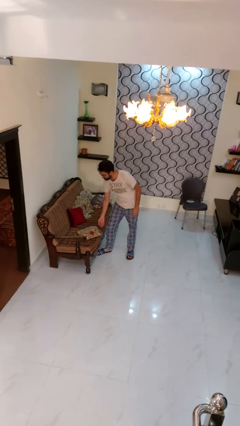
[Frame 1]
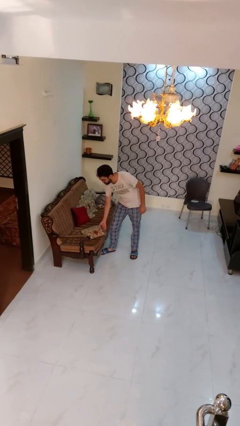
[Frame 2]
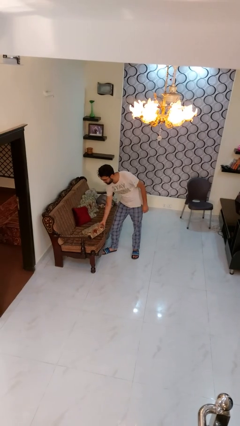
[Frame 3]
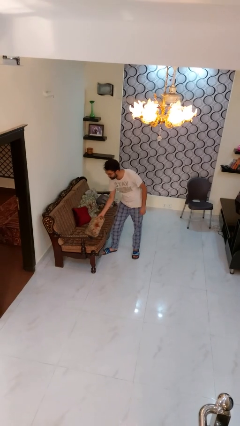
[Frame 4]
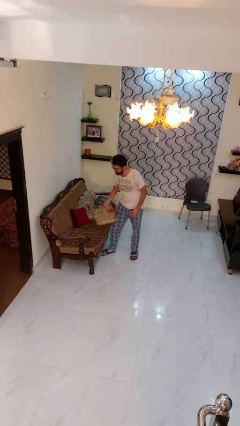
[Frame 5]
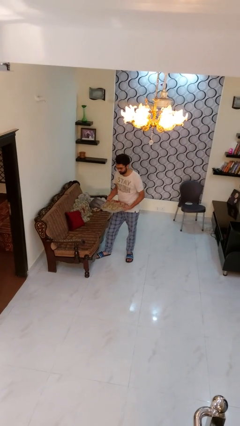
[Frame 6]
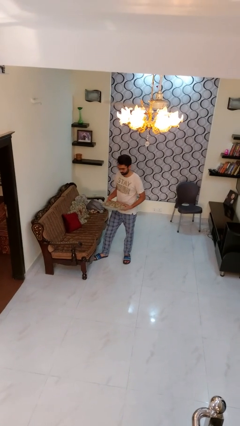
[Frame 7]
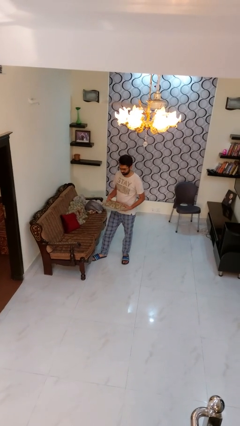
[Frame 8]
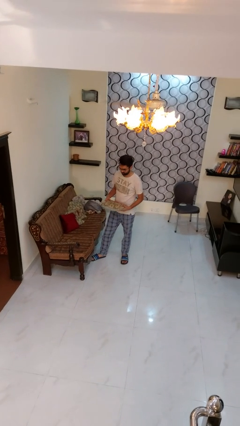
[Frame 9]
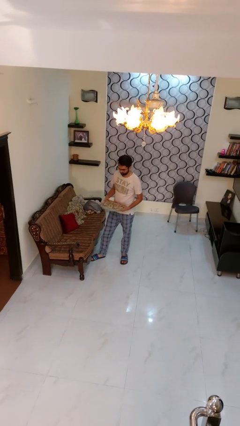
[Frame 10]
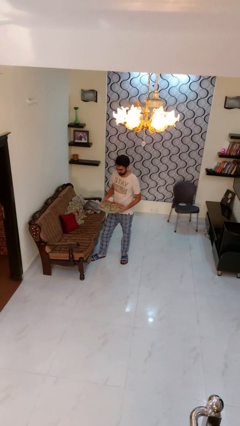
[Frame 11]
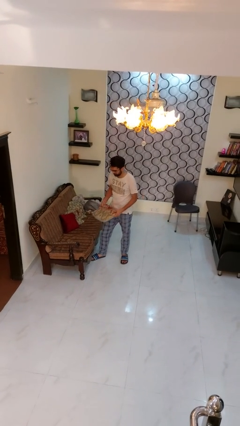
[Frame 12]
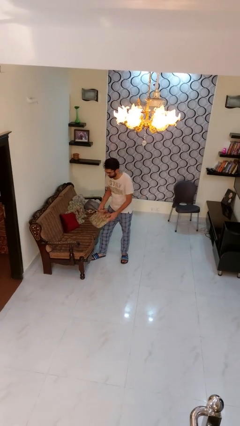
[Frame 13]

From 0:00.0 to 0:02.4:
person picks up object from couch

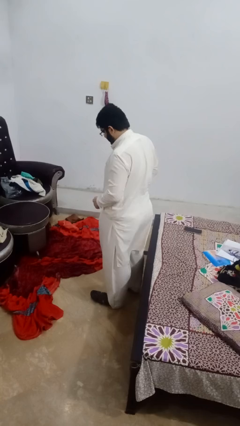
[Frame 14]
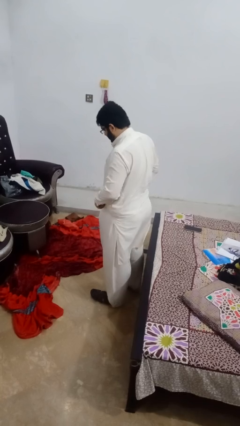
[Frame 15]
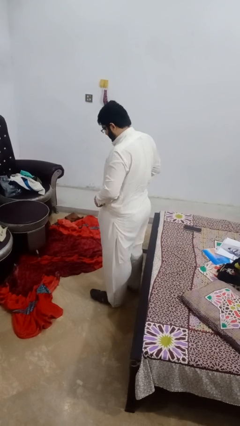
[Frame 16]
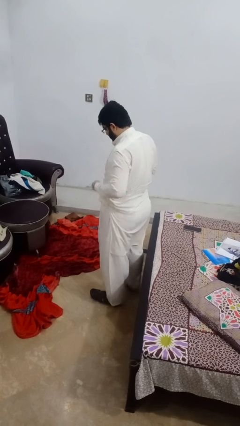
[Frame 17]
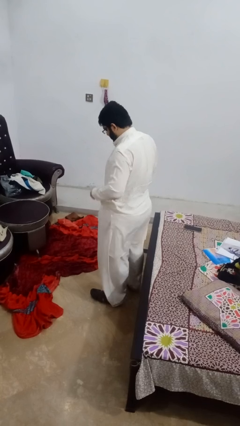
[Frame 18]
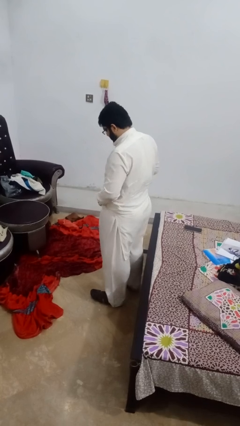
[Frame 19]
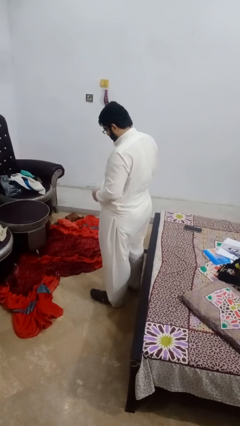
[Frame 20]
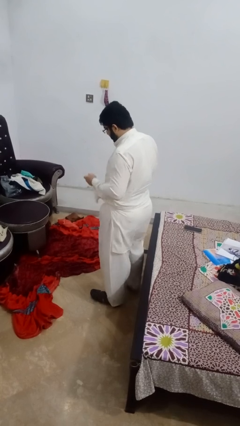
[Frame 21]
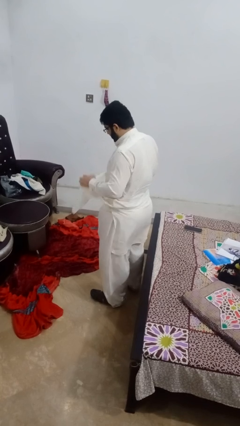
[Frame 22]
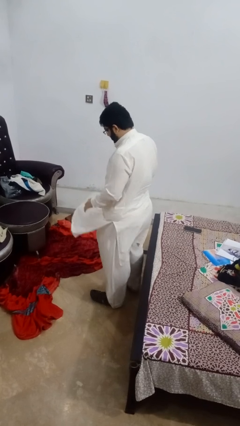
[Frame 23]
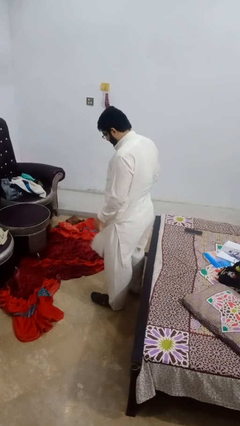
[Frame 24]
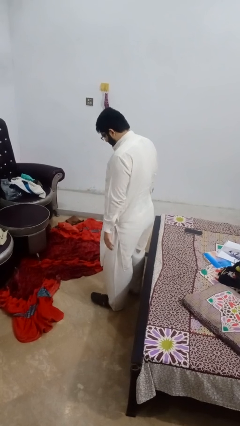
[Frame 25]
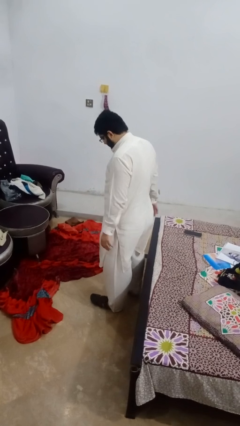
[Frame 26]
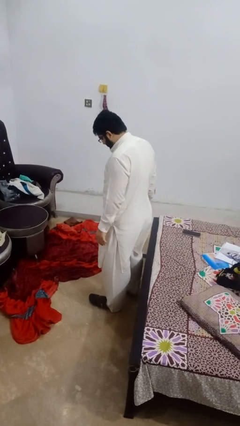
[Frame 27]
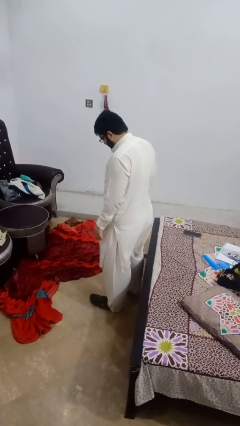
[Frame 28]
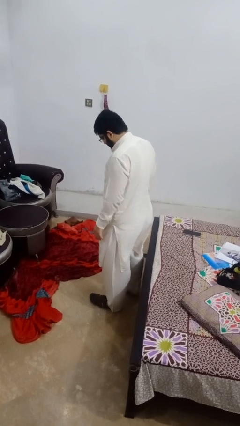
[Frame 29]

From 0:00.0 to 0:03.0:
person untucks shirt

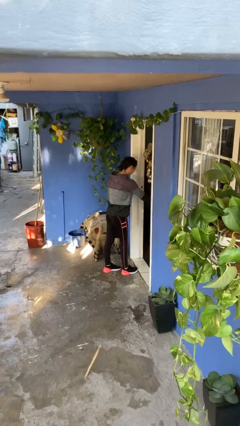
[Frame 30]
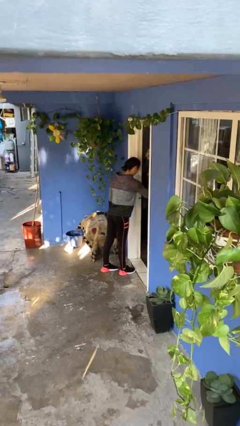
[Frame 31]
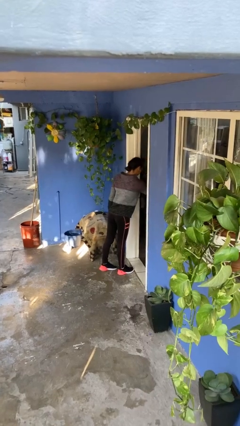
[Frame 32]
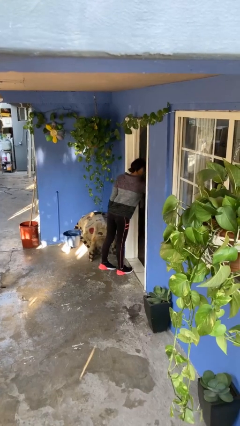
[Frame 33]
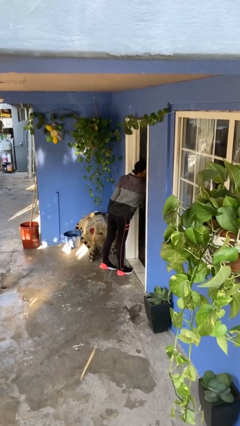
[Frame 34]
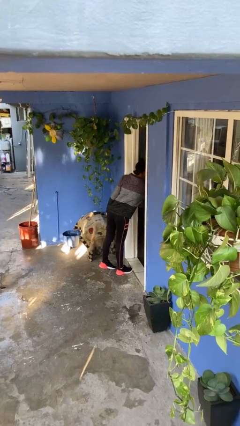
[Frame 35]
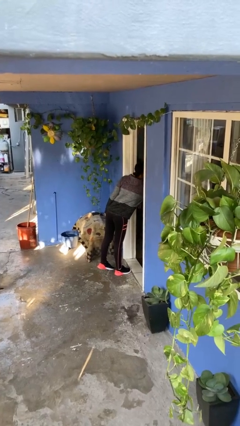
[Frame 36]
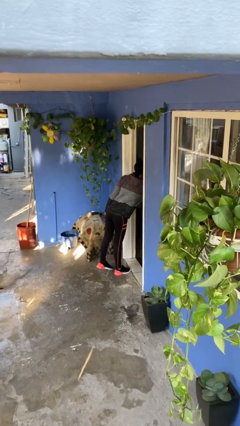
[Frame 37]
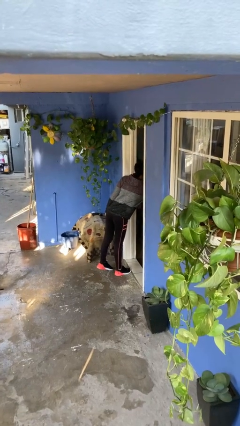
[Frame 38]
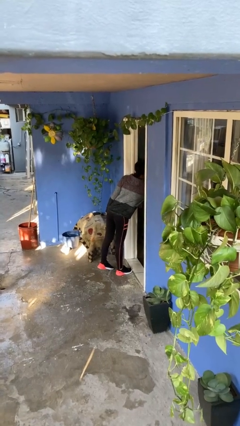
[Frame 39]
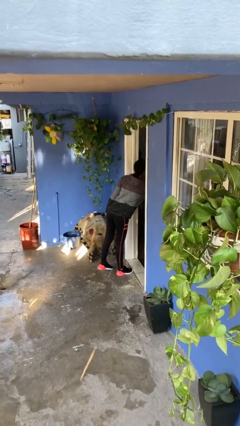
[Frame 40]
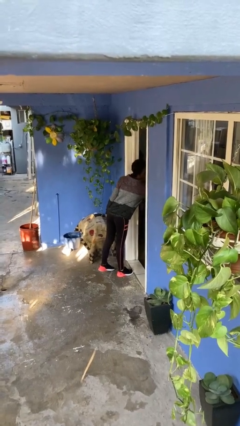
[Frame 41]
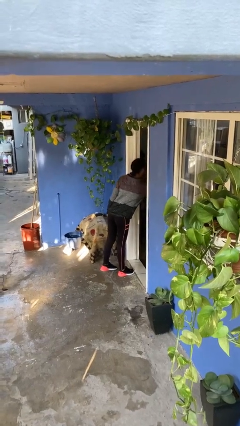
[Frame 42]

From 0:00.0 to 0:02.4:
person opens facility door

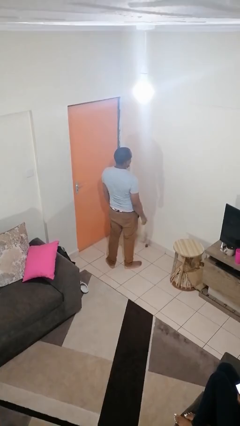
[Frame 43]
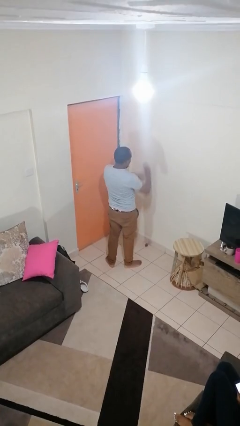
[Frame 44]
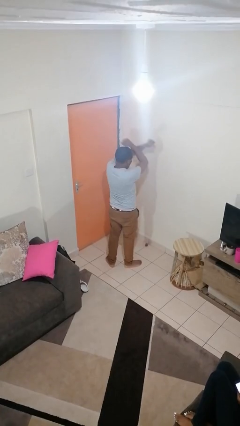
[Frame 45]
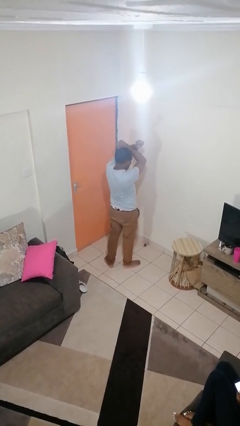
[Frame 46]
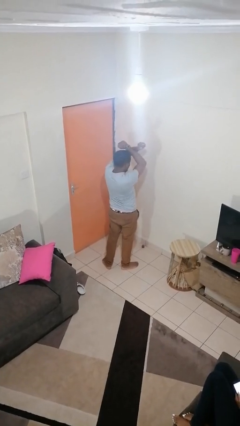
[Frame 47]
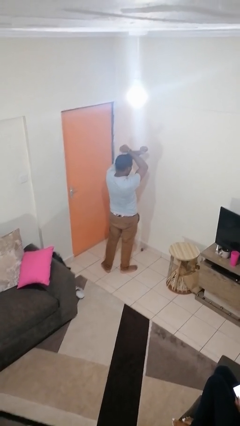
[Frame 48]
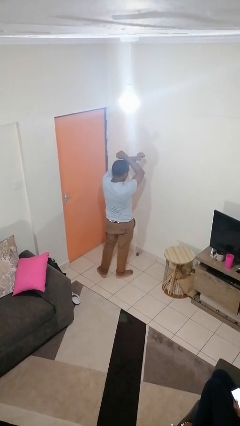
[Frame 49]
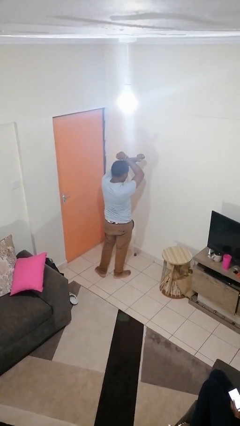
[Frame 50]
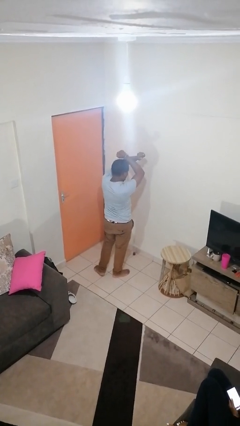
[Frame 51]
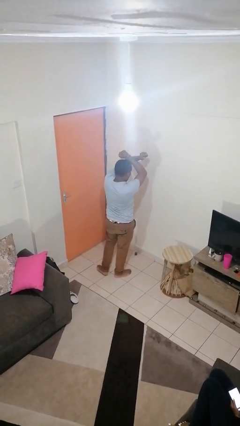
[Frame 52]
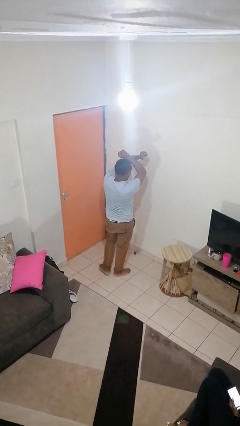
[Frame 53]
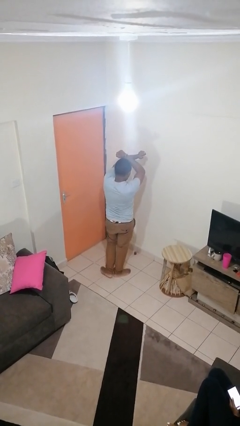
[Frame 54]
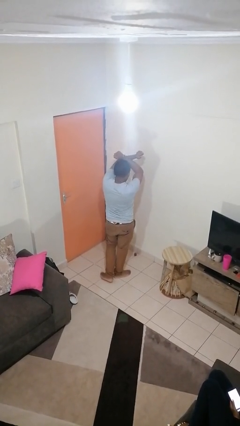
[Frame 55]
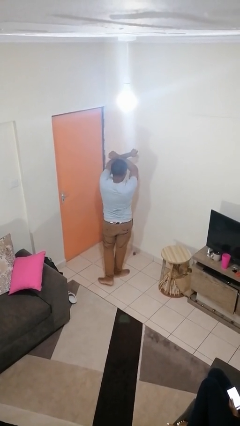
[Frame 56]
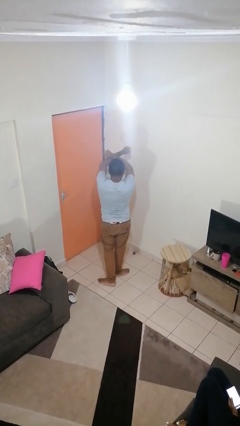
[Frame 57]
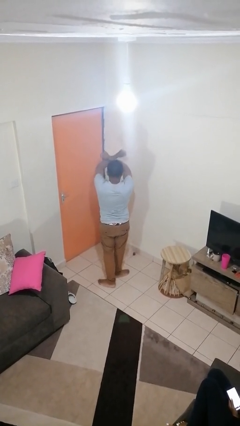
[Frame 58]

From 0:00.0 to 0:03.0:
person gestures arms x

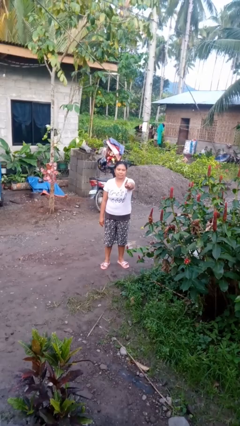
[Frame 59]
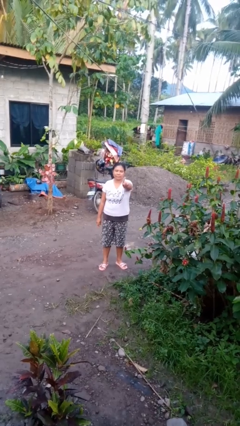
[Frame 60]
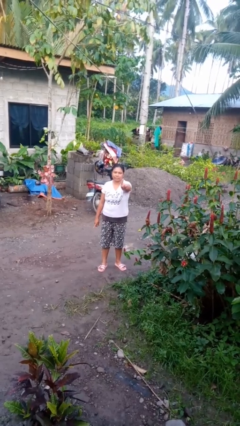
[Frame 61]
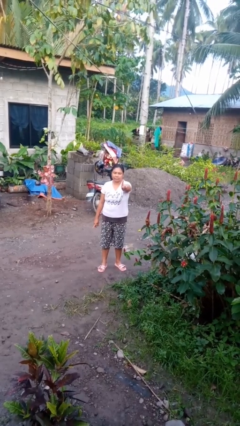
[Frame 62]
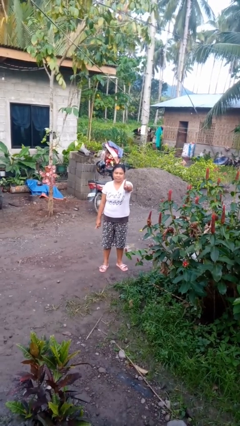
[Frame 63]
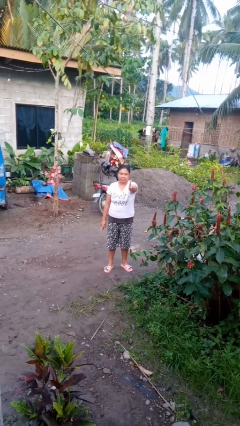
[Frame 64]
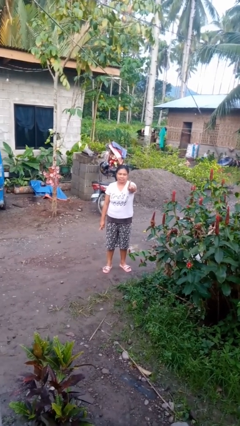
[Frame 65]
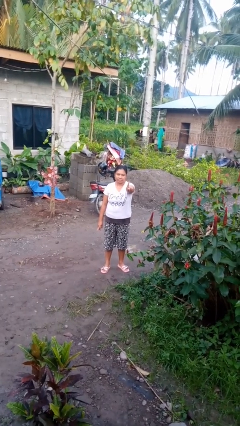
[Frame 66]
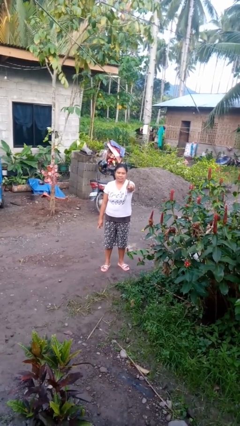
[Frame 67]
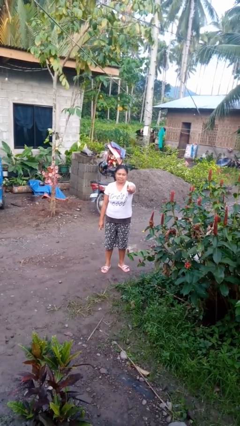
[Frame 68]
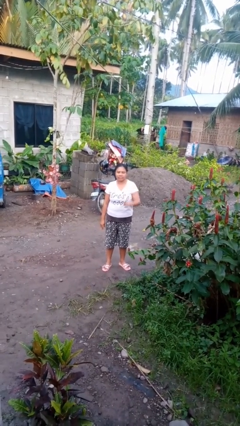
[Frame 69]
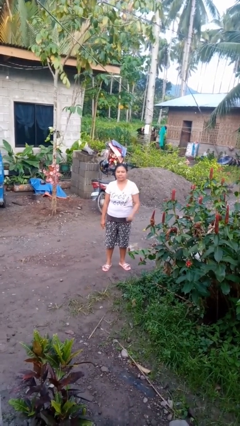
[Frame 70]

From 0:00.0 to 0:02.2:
person gestures number one

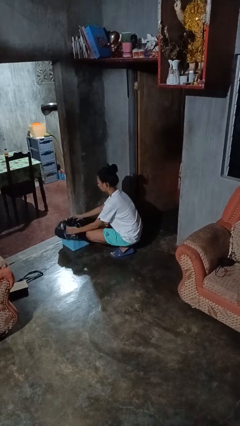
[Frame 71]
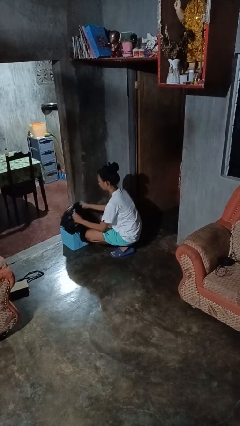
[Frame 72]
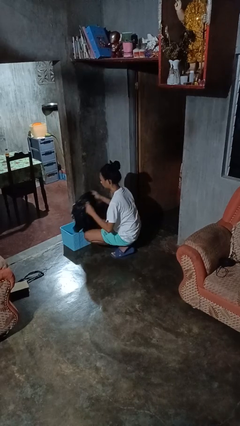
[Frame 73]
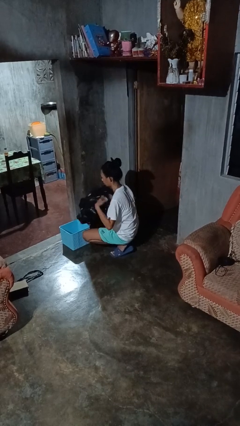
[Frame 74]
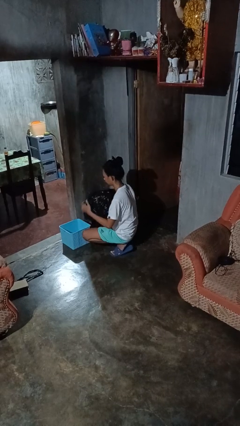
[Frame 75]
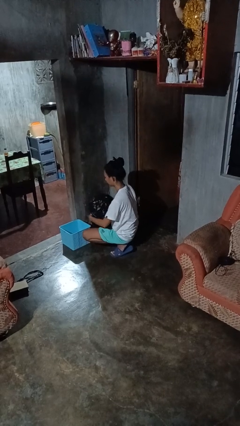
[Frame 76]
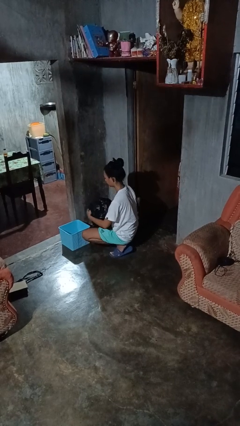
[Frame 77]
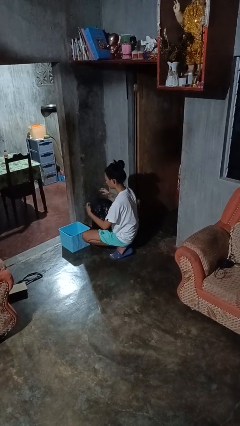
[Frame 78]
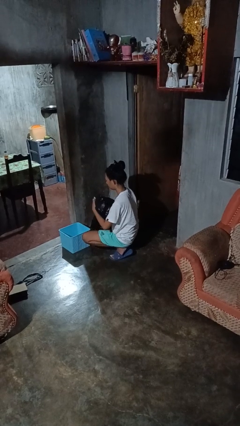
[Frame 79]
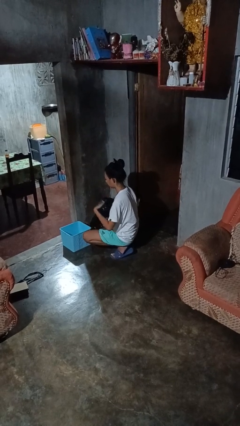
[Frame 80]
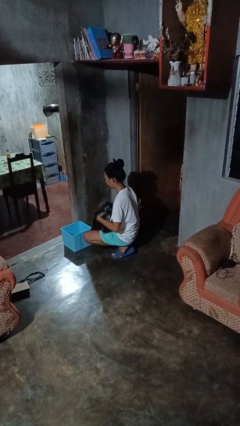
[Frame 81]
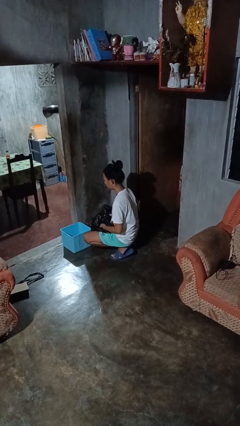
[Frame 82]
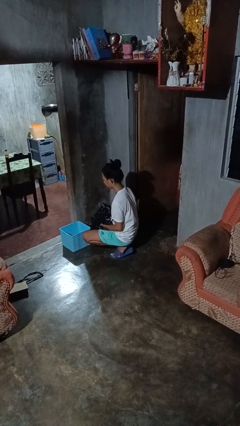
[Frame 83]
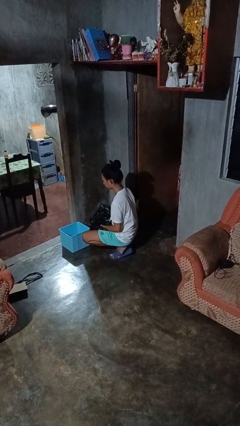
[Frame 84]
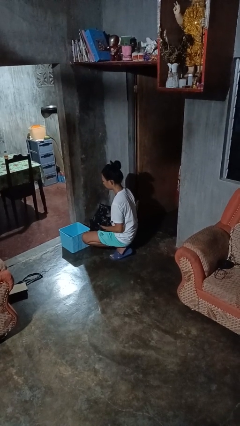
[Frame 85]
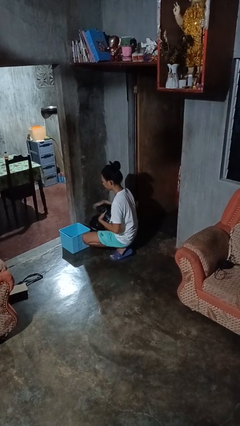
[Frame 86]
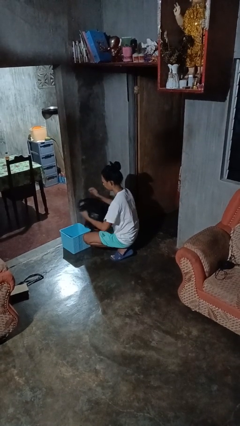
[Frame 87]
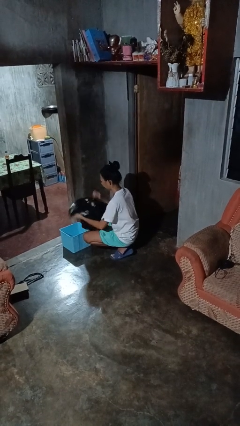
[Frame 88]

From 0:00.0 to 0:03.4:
person removes trashbag from trashcan

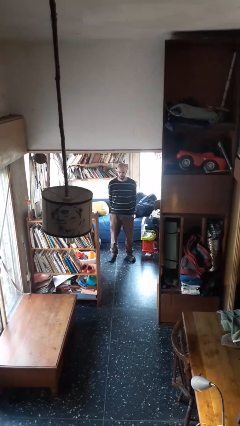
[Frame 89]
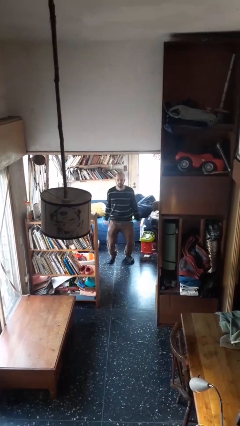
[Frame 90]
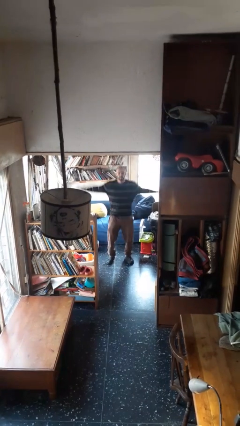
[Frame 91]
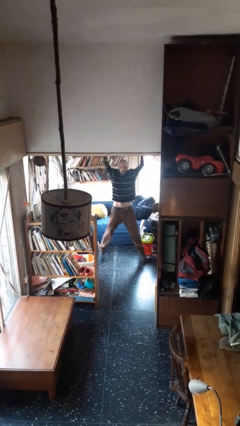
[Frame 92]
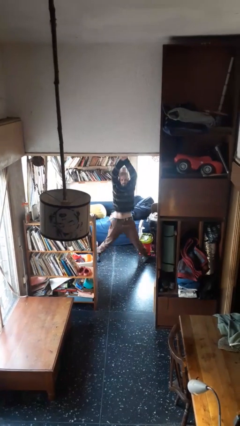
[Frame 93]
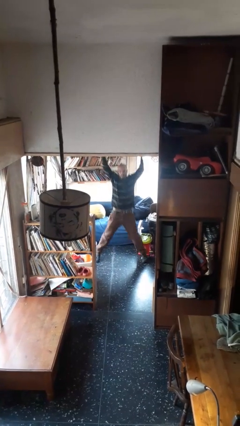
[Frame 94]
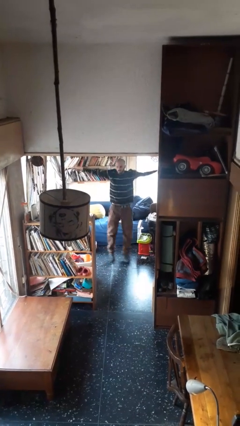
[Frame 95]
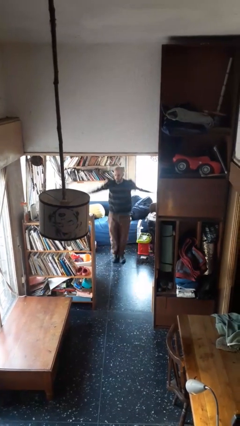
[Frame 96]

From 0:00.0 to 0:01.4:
person exercises with jumping jacks
